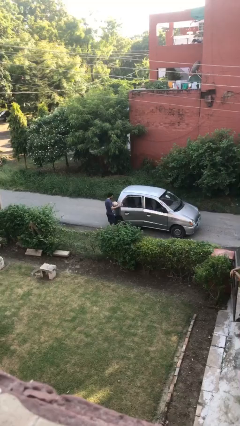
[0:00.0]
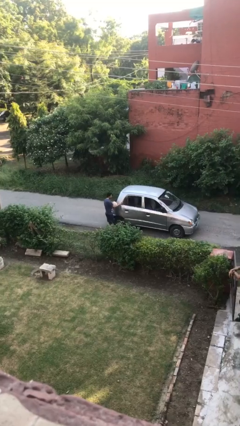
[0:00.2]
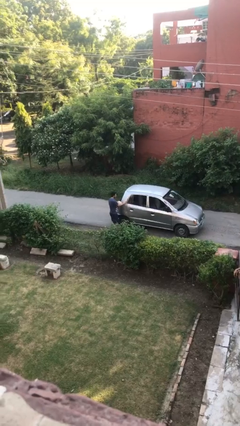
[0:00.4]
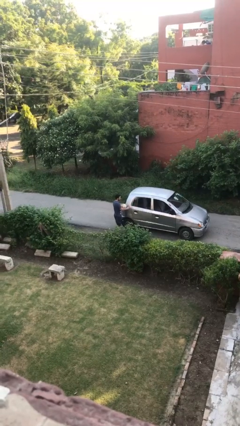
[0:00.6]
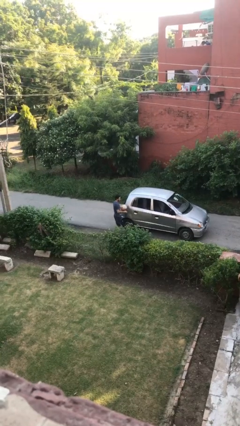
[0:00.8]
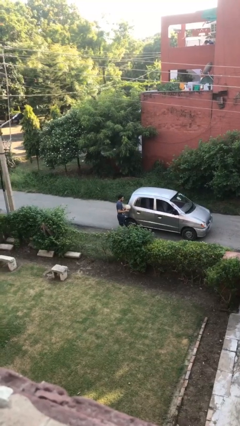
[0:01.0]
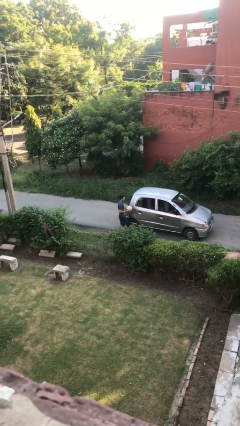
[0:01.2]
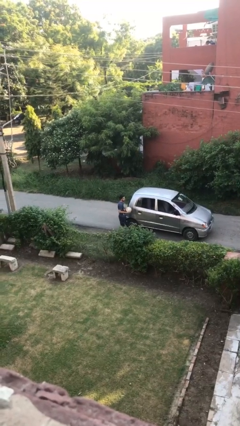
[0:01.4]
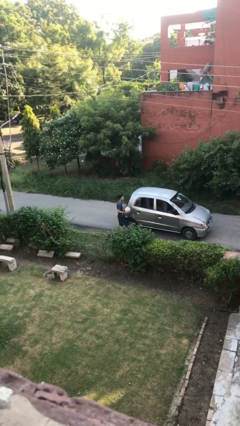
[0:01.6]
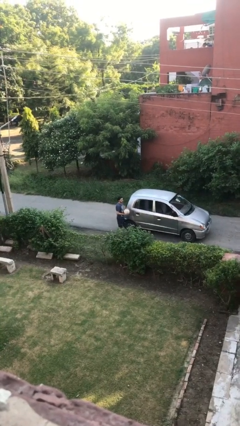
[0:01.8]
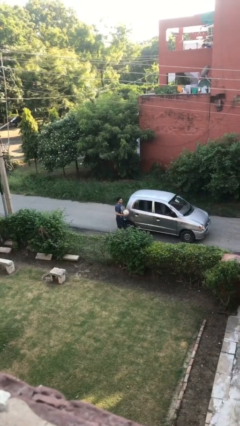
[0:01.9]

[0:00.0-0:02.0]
person closes car door

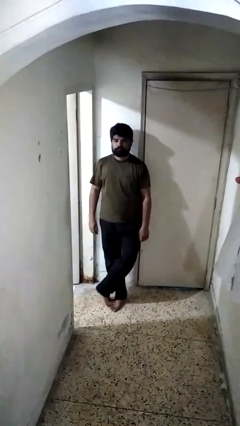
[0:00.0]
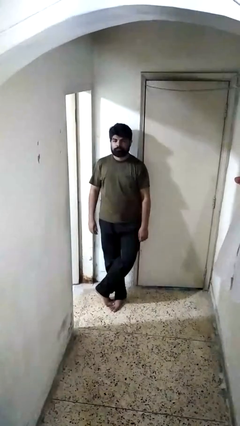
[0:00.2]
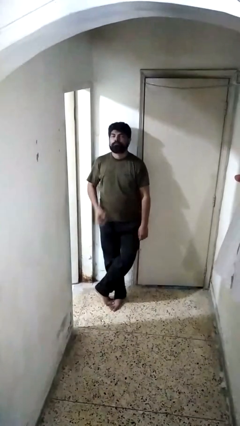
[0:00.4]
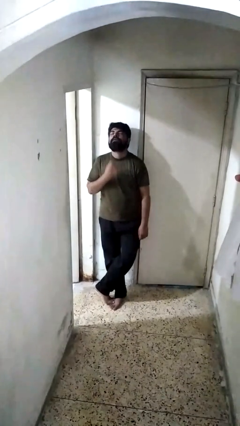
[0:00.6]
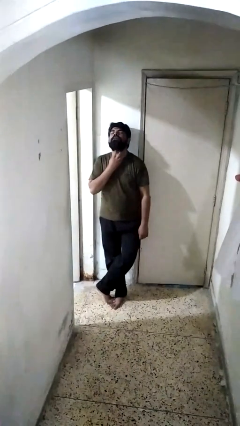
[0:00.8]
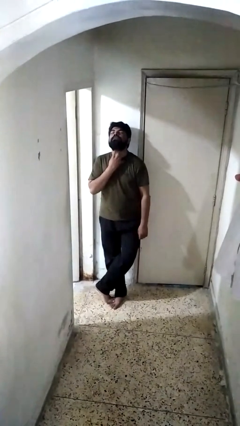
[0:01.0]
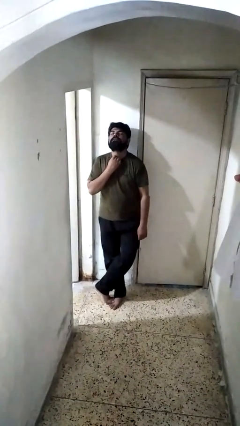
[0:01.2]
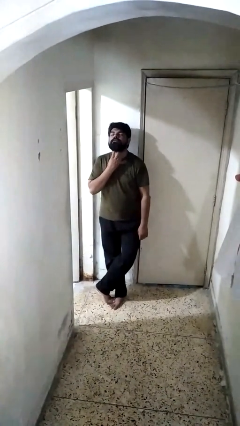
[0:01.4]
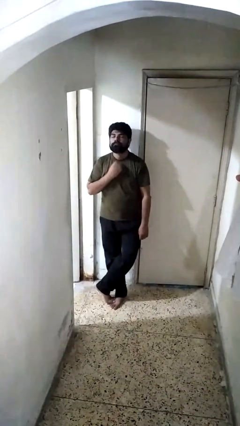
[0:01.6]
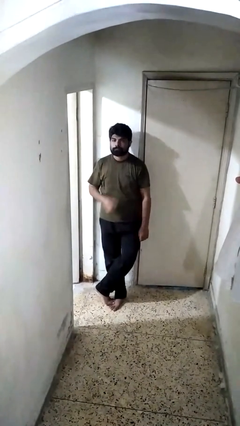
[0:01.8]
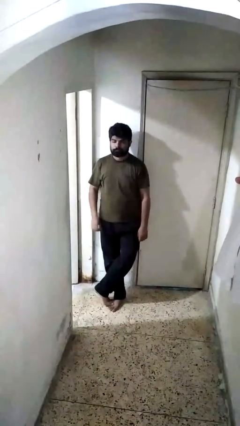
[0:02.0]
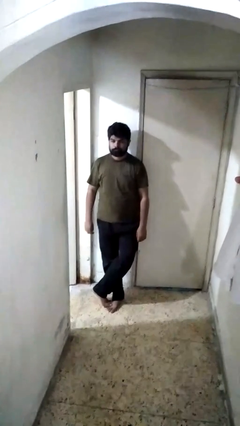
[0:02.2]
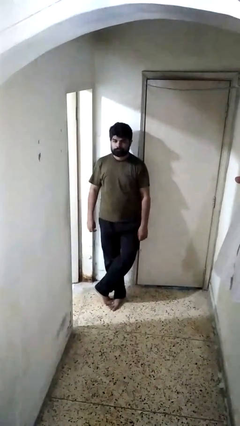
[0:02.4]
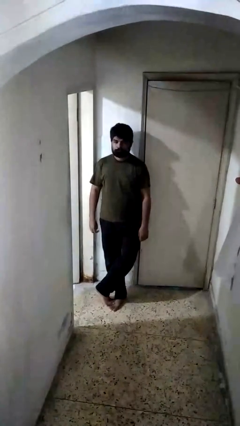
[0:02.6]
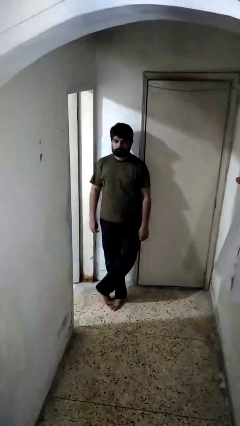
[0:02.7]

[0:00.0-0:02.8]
person rubs neck

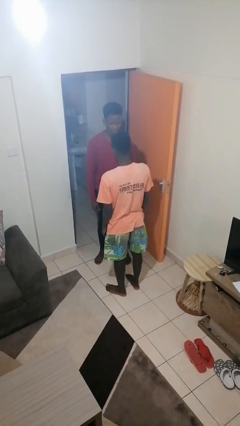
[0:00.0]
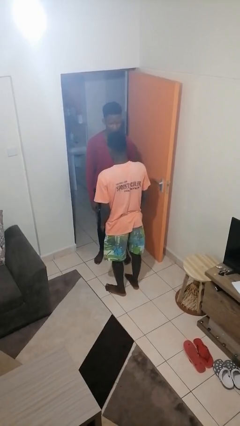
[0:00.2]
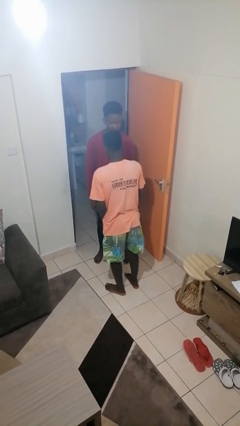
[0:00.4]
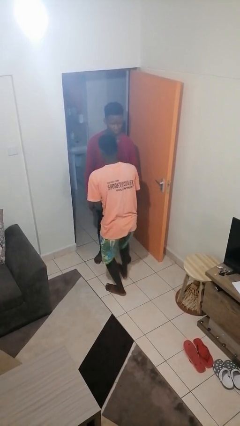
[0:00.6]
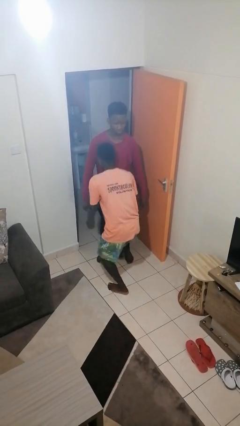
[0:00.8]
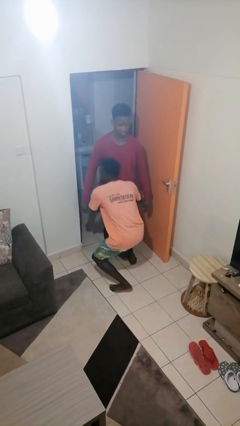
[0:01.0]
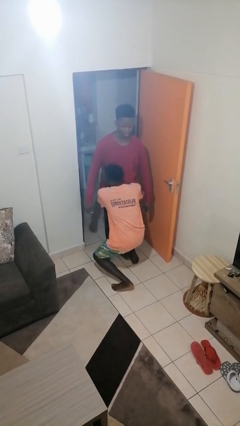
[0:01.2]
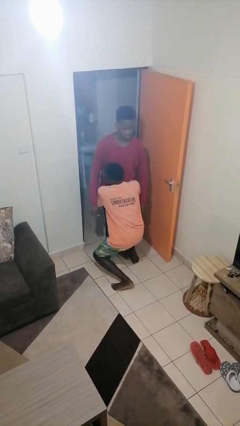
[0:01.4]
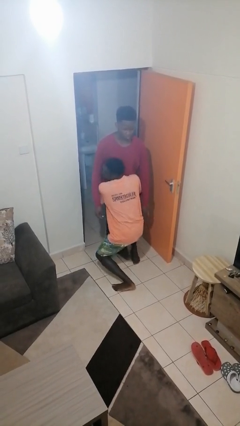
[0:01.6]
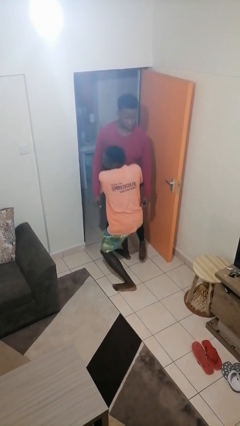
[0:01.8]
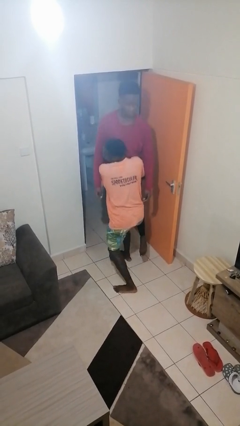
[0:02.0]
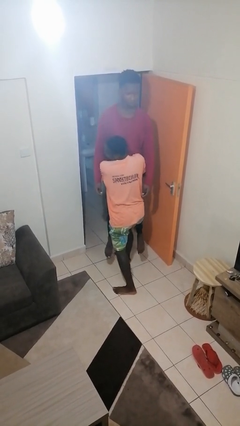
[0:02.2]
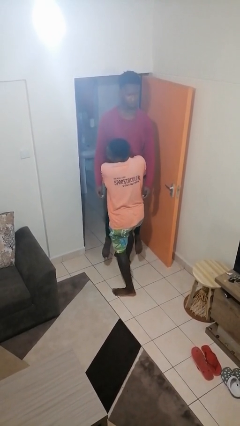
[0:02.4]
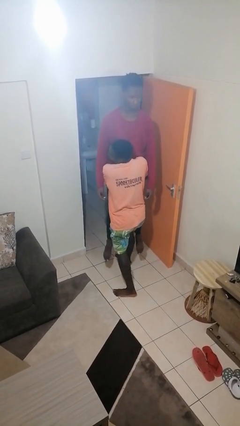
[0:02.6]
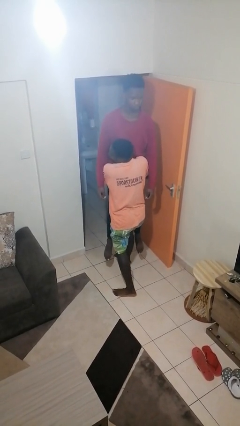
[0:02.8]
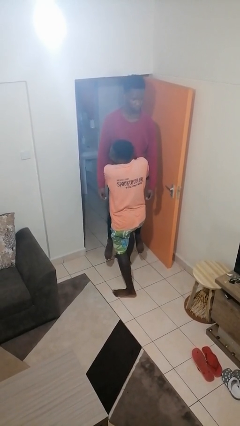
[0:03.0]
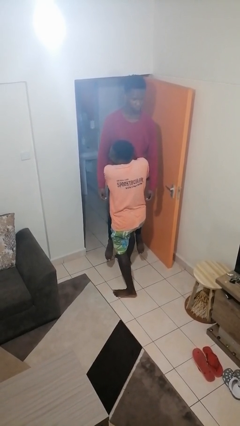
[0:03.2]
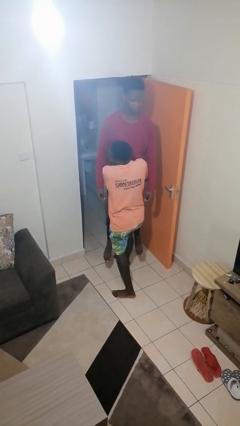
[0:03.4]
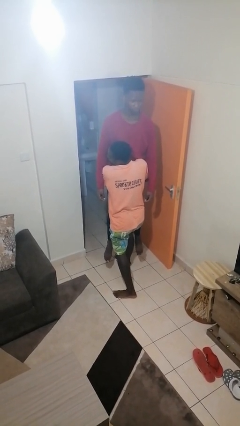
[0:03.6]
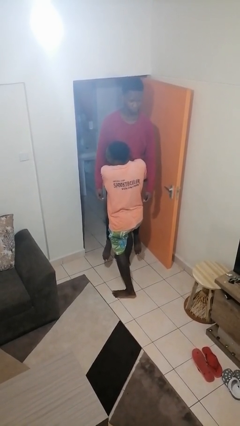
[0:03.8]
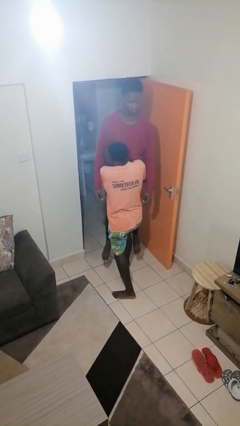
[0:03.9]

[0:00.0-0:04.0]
person picks up person

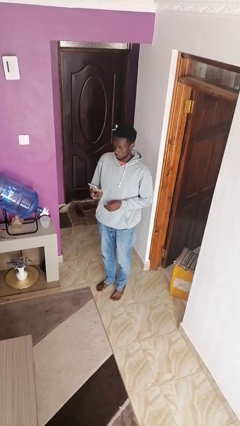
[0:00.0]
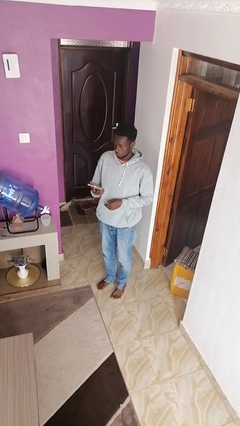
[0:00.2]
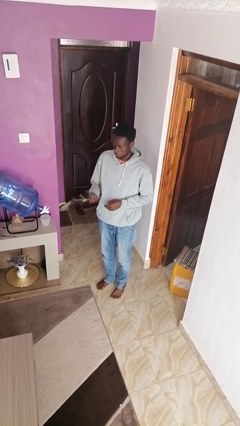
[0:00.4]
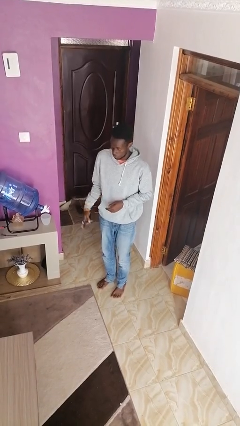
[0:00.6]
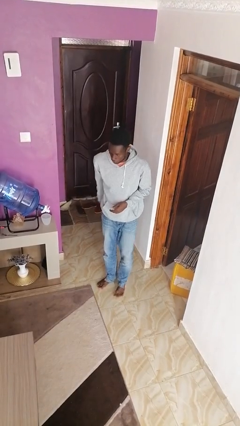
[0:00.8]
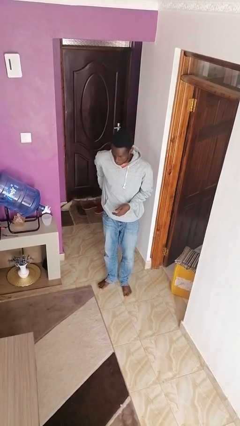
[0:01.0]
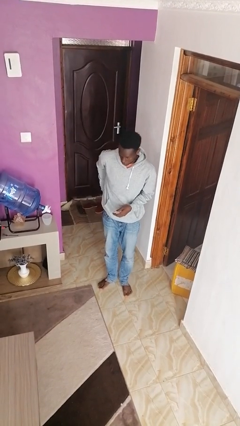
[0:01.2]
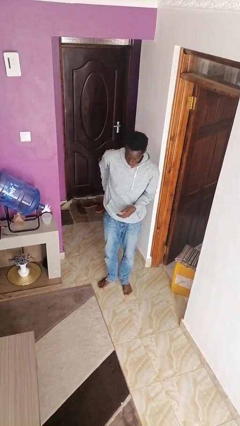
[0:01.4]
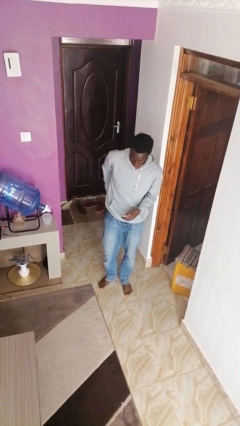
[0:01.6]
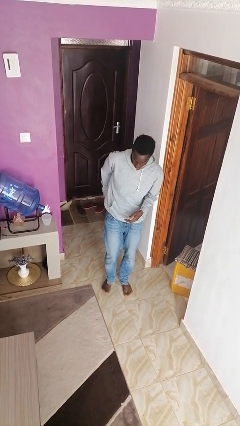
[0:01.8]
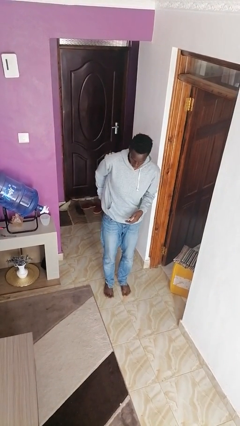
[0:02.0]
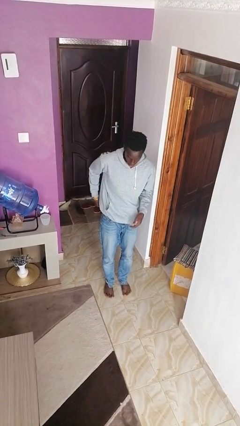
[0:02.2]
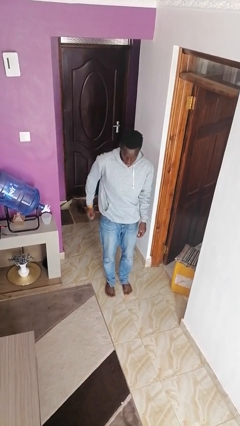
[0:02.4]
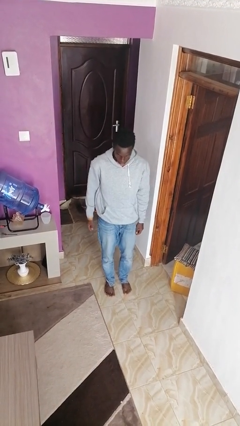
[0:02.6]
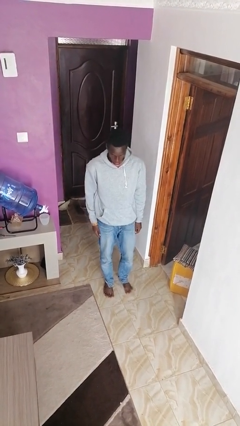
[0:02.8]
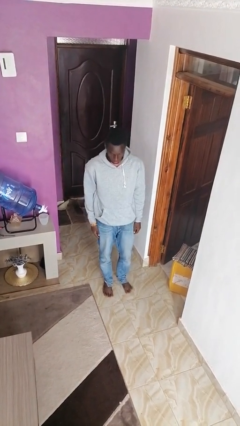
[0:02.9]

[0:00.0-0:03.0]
person puts phone into pocket

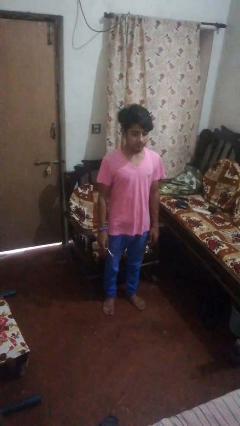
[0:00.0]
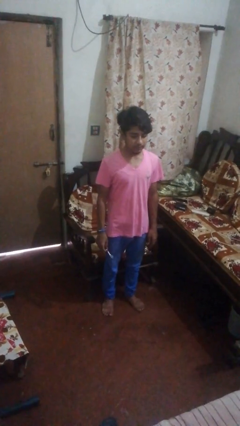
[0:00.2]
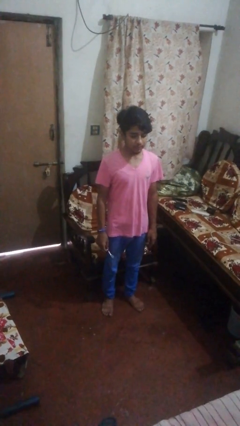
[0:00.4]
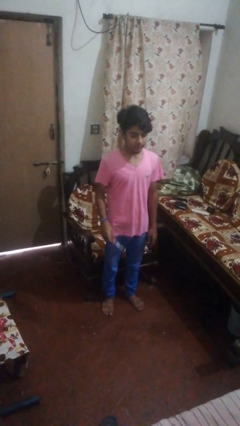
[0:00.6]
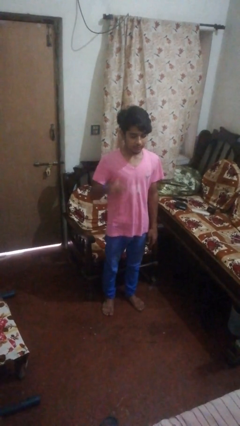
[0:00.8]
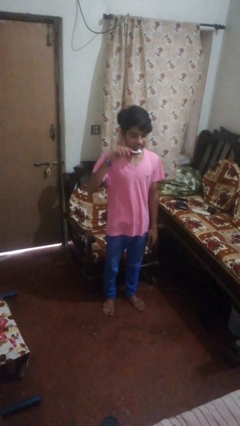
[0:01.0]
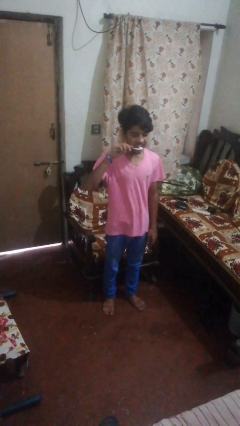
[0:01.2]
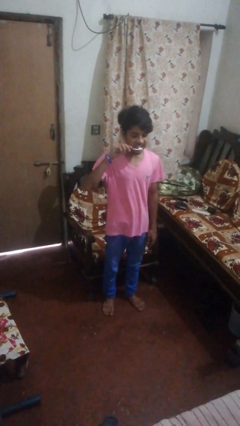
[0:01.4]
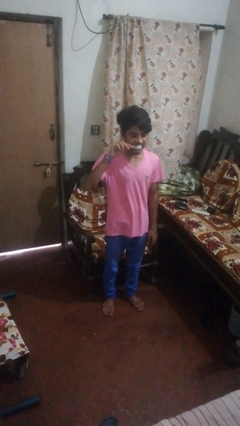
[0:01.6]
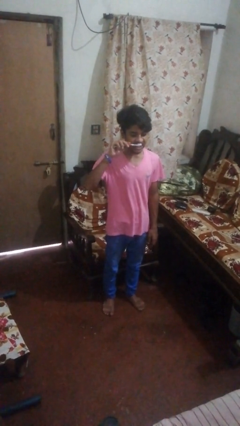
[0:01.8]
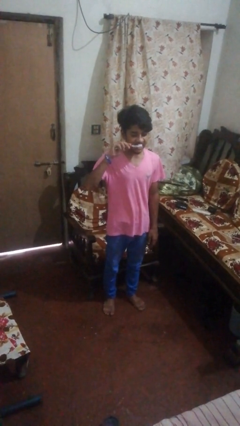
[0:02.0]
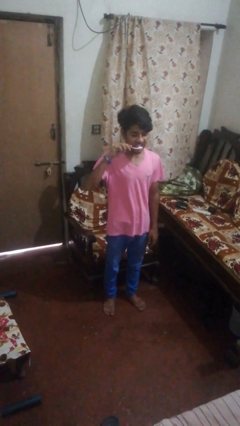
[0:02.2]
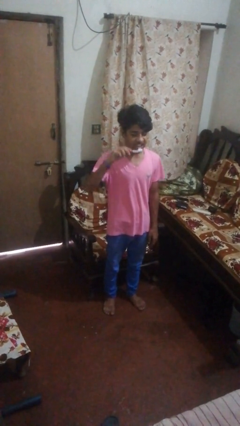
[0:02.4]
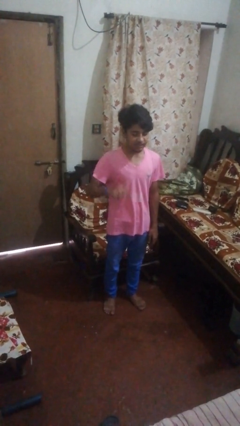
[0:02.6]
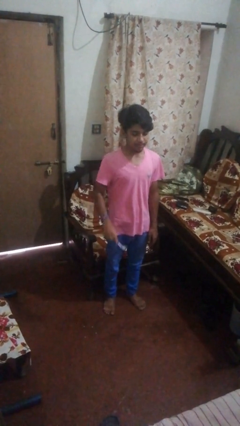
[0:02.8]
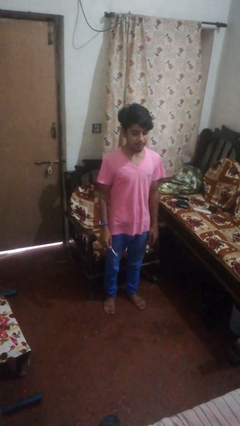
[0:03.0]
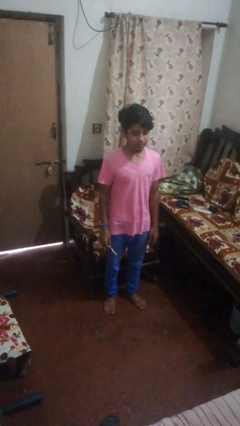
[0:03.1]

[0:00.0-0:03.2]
person brushes teeth

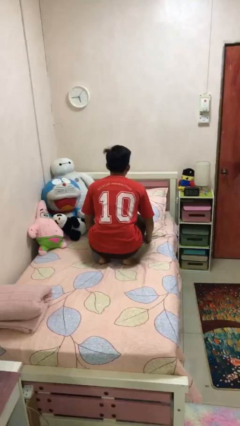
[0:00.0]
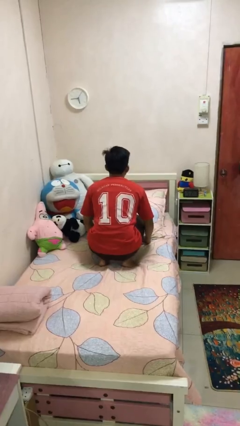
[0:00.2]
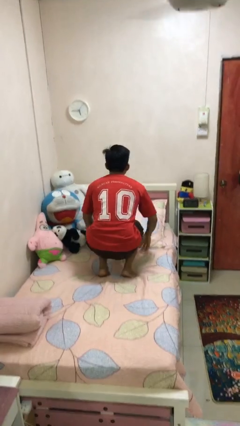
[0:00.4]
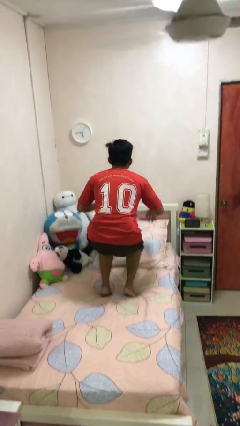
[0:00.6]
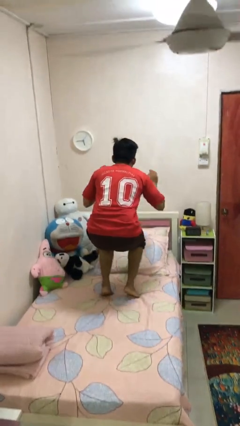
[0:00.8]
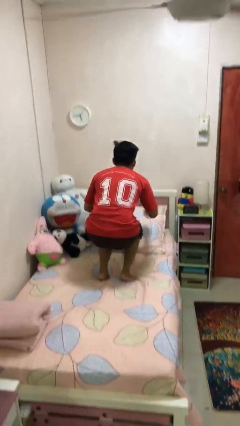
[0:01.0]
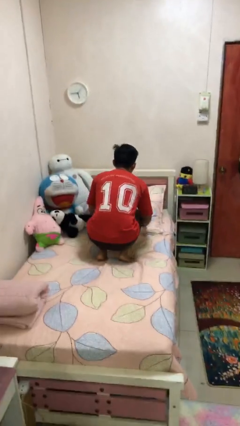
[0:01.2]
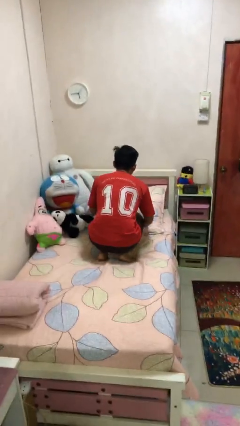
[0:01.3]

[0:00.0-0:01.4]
person jumps on bed

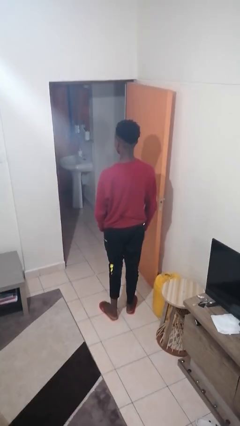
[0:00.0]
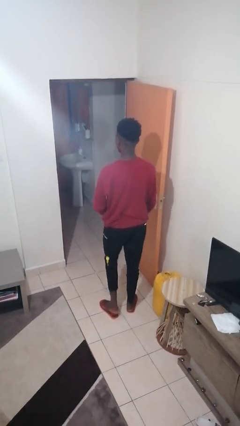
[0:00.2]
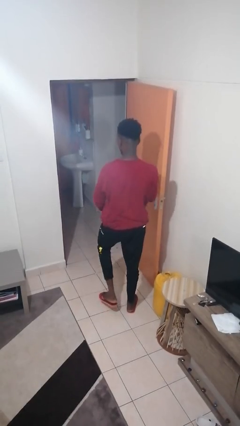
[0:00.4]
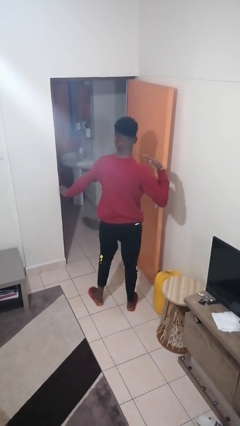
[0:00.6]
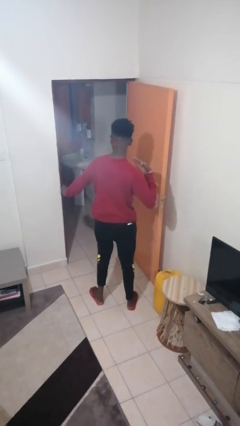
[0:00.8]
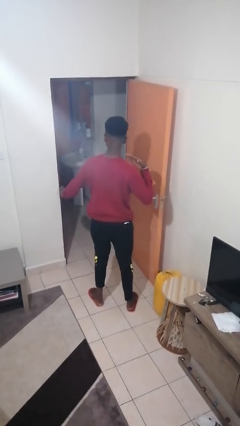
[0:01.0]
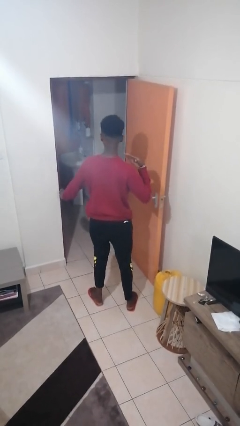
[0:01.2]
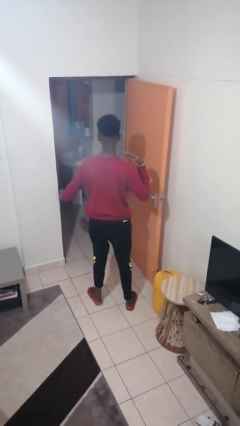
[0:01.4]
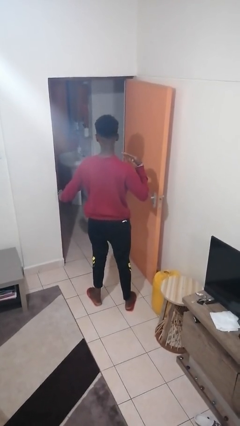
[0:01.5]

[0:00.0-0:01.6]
person karate chop
